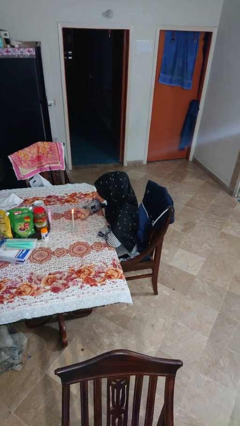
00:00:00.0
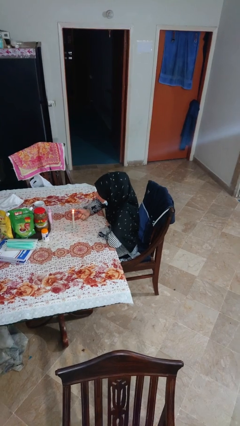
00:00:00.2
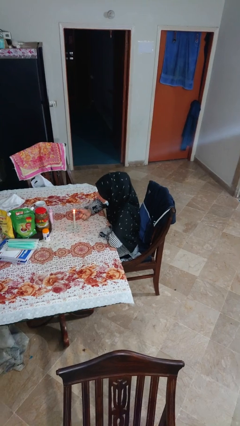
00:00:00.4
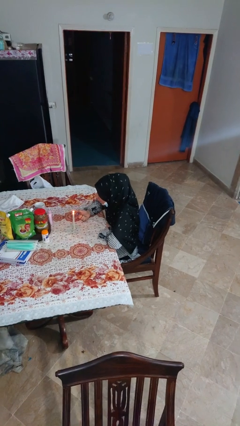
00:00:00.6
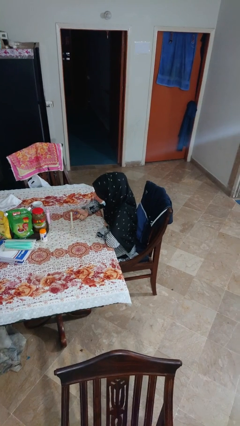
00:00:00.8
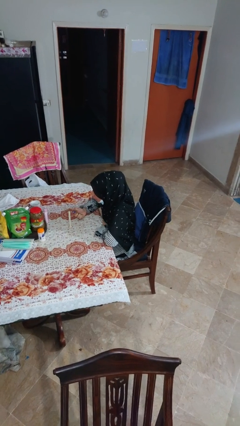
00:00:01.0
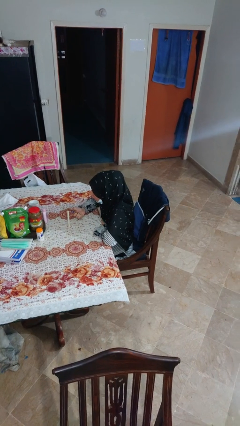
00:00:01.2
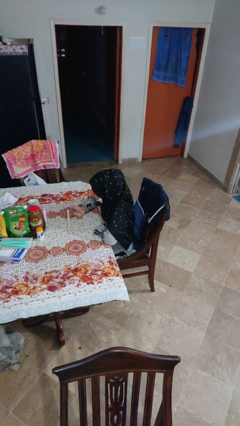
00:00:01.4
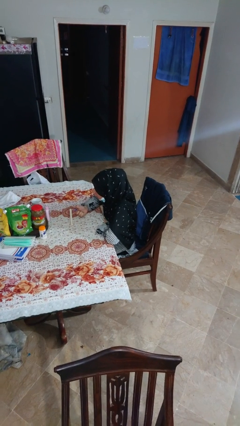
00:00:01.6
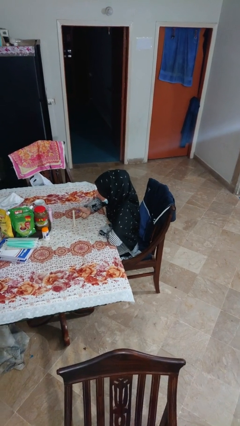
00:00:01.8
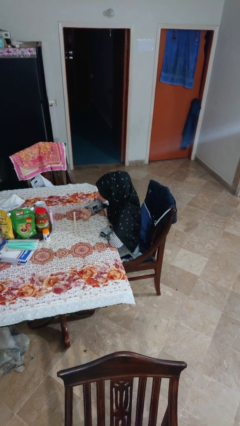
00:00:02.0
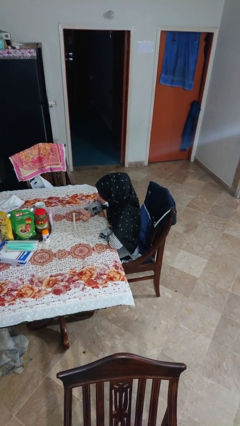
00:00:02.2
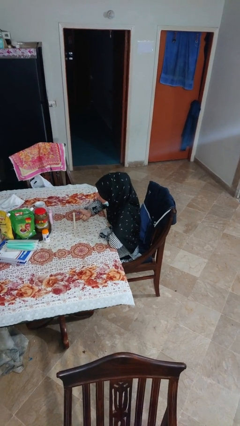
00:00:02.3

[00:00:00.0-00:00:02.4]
person extinguishes candle

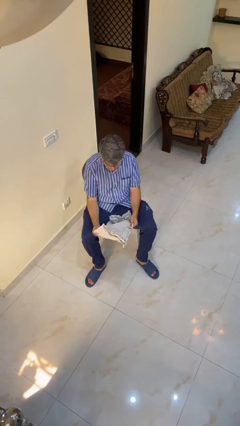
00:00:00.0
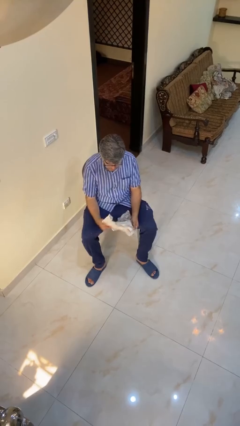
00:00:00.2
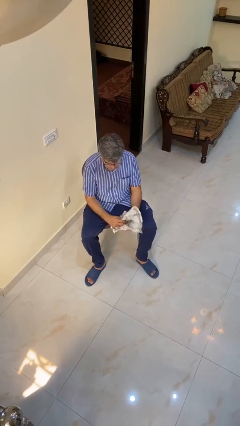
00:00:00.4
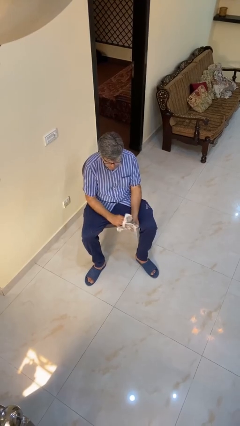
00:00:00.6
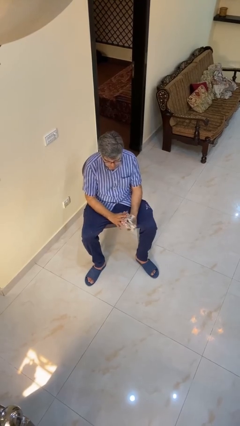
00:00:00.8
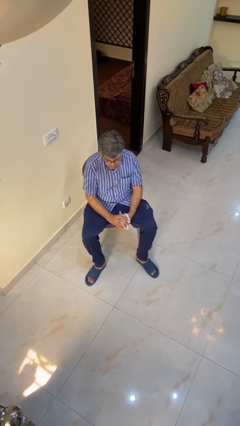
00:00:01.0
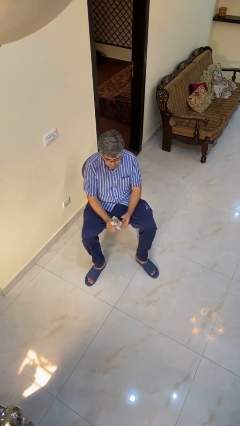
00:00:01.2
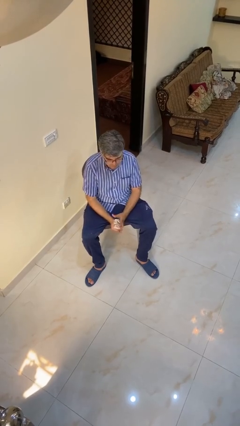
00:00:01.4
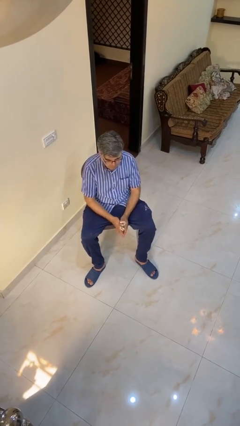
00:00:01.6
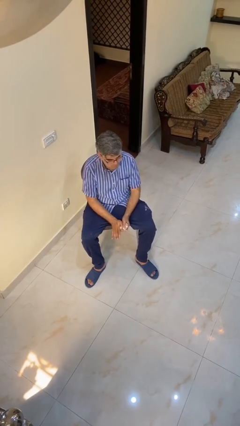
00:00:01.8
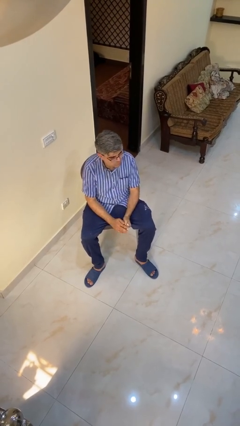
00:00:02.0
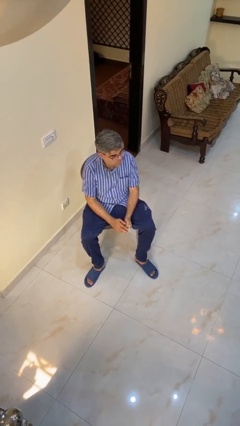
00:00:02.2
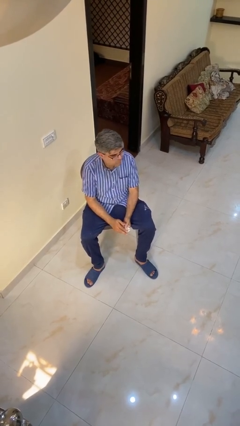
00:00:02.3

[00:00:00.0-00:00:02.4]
person crumples paper

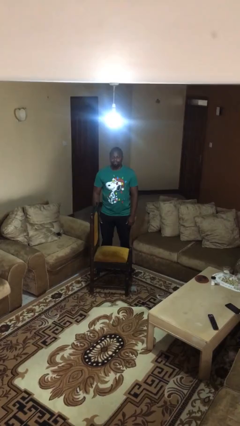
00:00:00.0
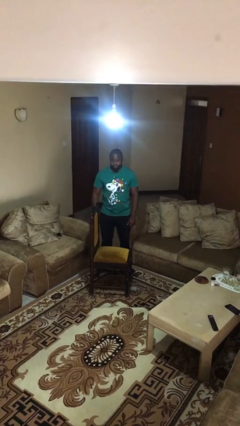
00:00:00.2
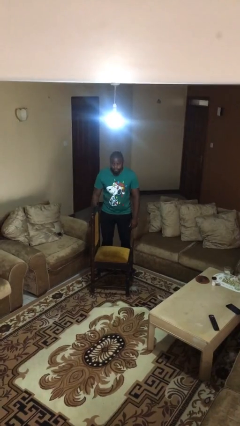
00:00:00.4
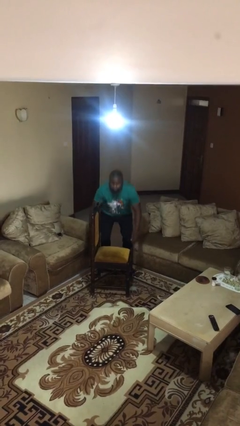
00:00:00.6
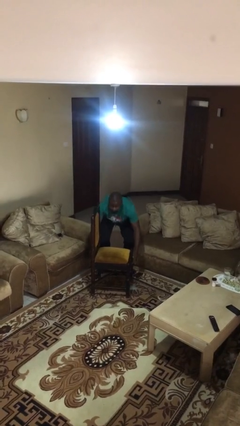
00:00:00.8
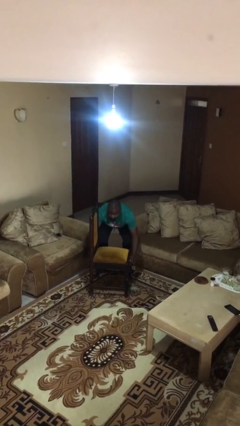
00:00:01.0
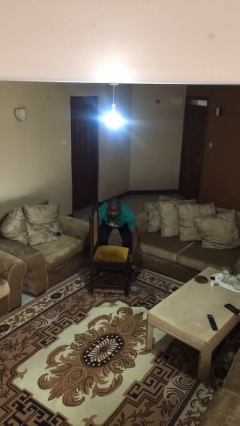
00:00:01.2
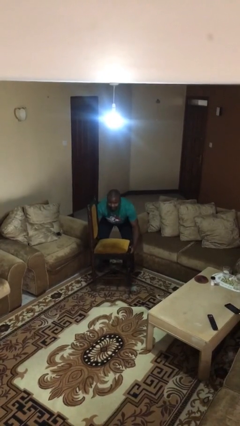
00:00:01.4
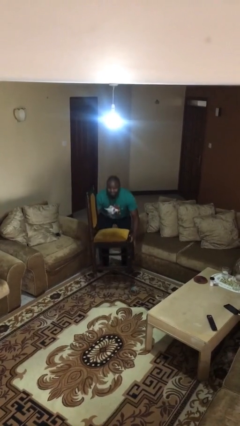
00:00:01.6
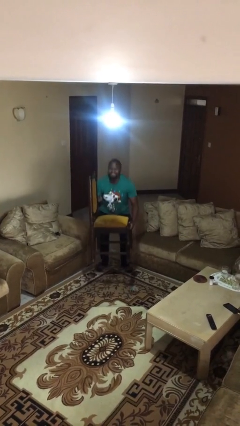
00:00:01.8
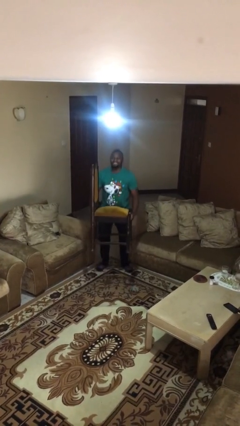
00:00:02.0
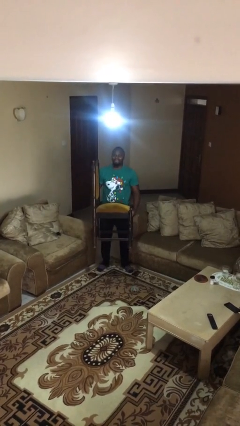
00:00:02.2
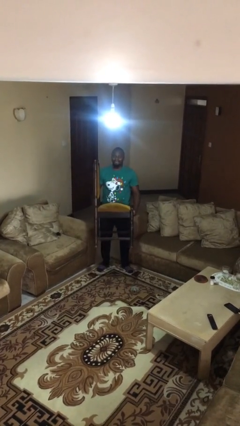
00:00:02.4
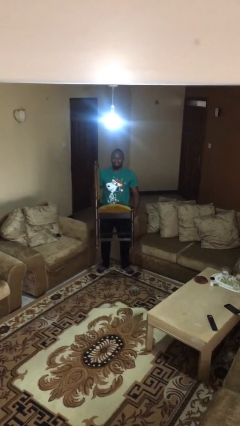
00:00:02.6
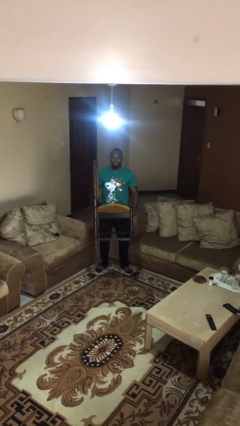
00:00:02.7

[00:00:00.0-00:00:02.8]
person picks up object from floor

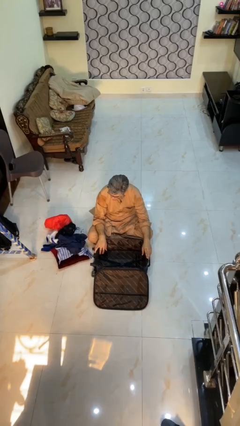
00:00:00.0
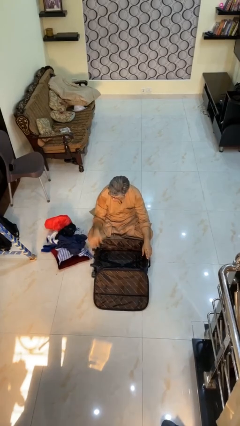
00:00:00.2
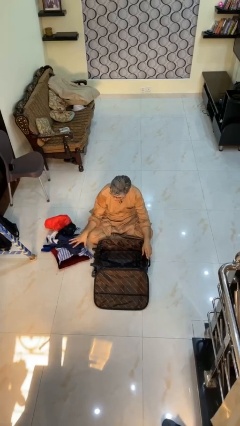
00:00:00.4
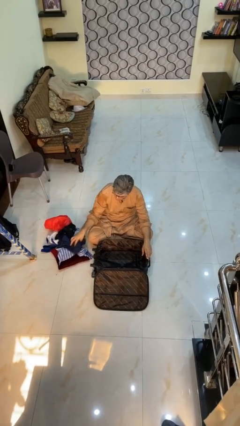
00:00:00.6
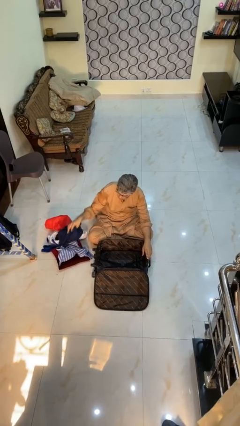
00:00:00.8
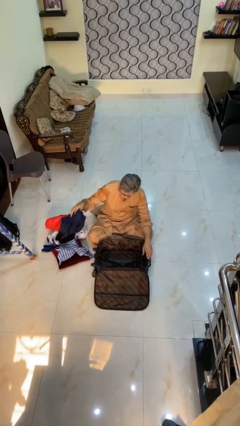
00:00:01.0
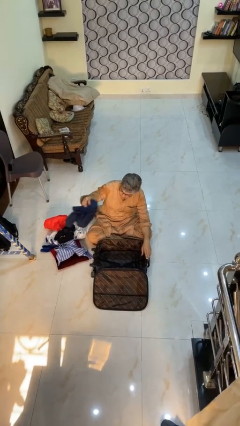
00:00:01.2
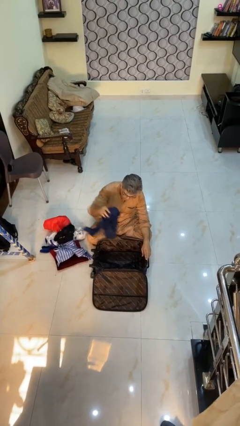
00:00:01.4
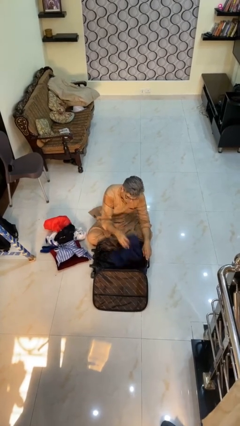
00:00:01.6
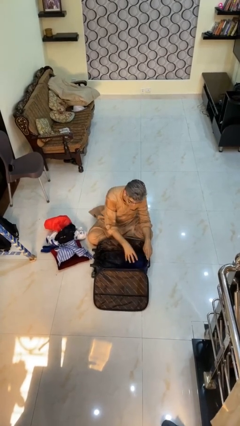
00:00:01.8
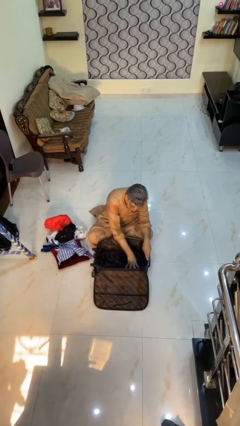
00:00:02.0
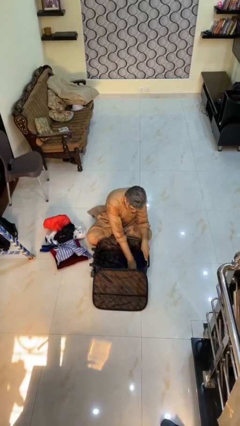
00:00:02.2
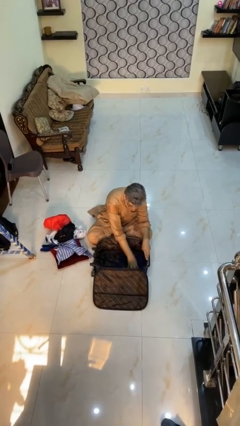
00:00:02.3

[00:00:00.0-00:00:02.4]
person loads clothes into suitcase

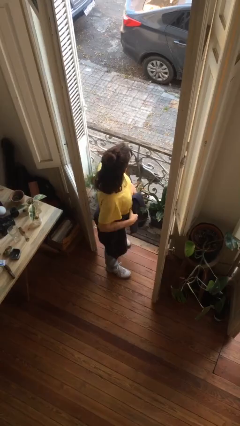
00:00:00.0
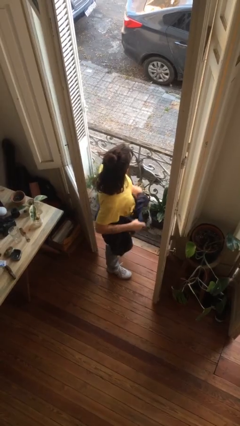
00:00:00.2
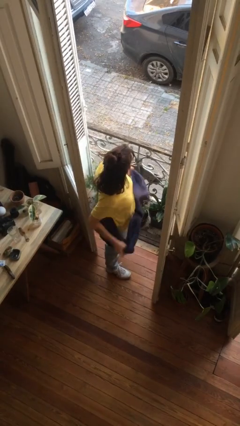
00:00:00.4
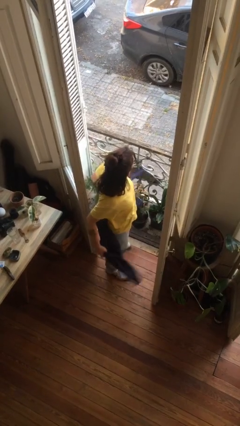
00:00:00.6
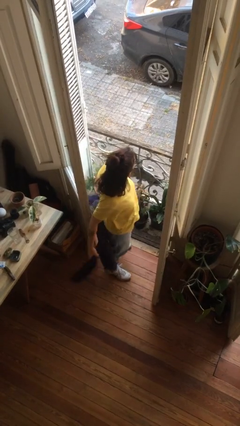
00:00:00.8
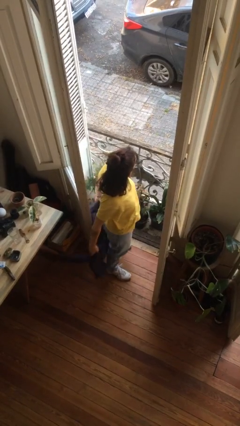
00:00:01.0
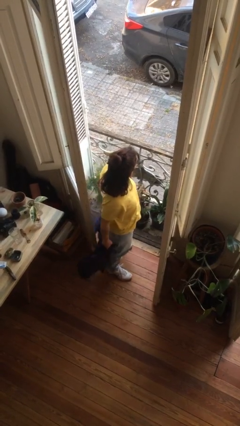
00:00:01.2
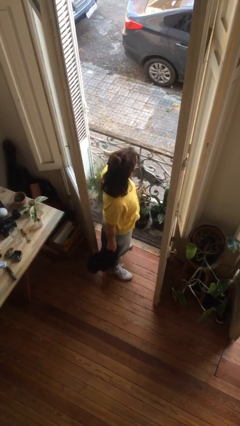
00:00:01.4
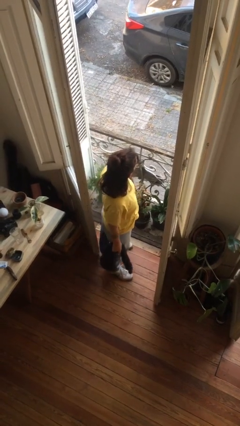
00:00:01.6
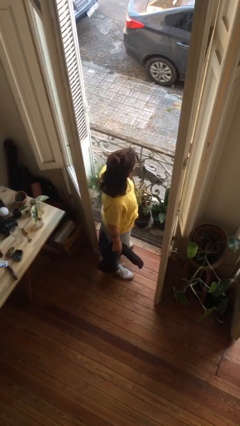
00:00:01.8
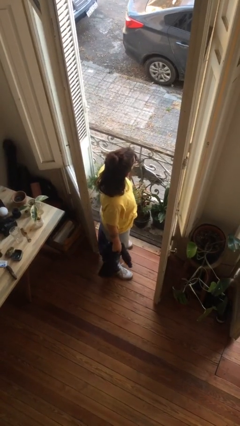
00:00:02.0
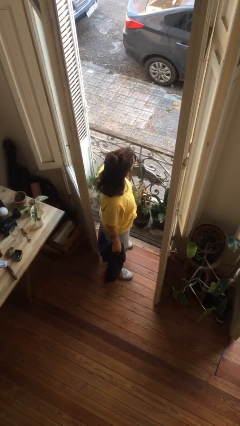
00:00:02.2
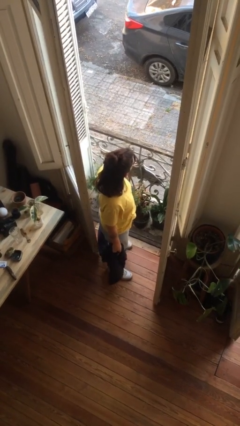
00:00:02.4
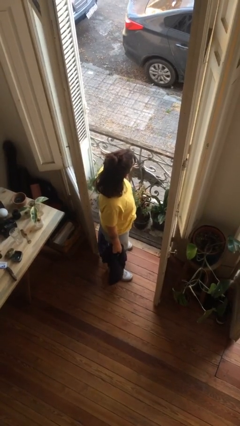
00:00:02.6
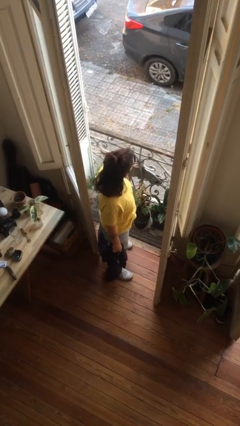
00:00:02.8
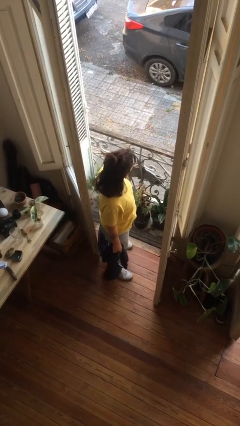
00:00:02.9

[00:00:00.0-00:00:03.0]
person unties jacket around waist

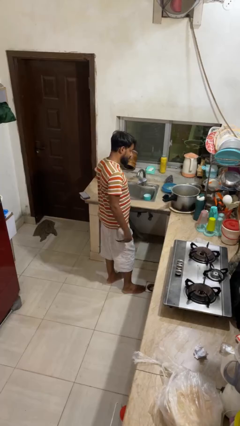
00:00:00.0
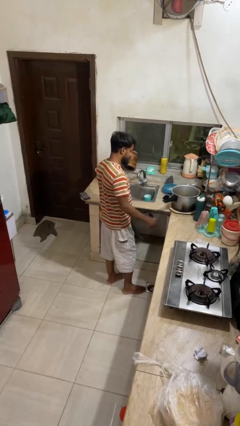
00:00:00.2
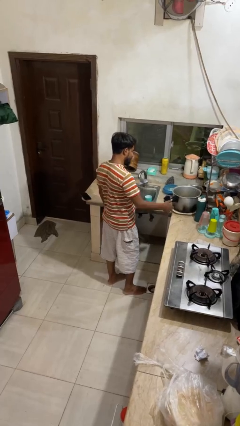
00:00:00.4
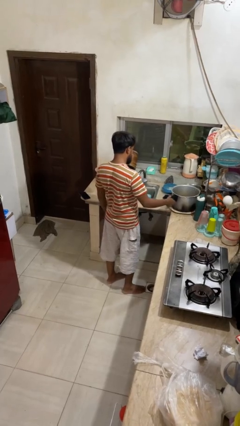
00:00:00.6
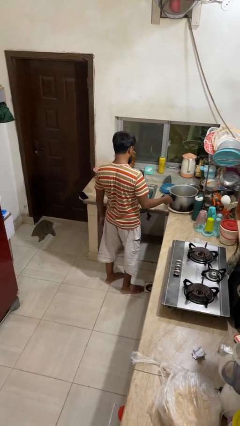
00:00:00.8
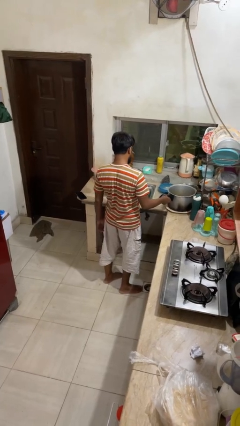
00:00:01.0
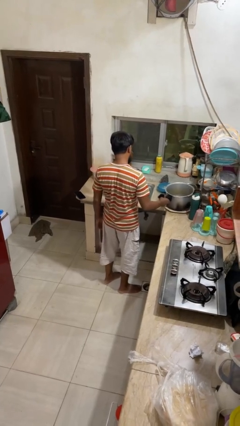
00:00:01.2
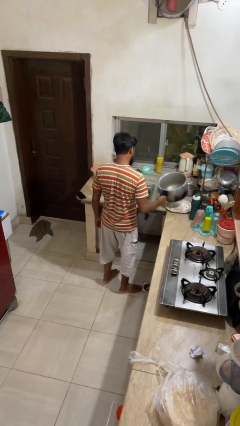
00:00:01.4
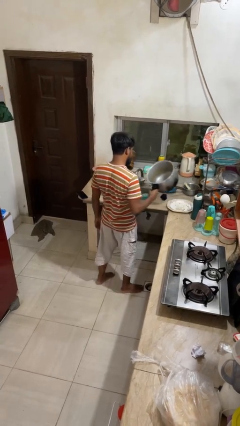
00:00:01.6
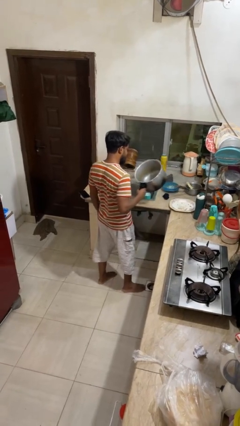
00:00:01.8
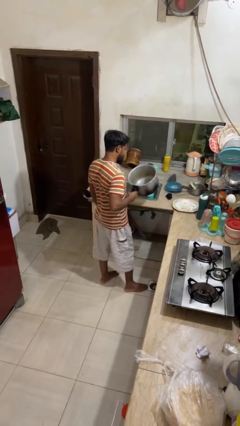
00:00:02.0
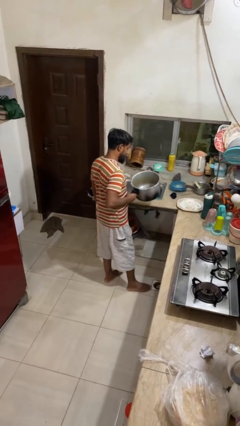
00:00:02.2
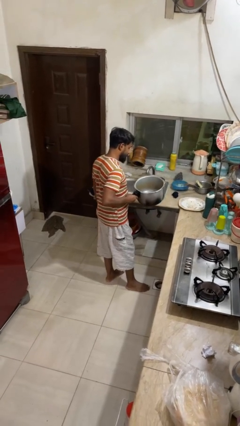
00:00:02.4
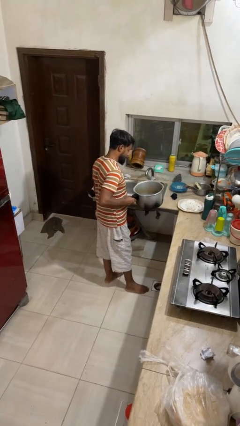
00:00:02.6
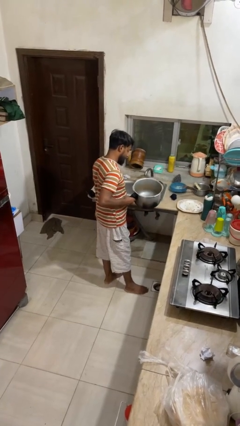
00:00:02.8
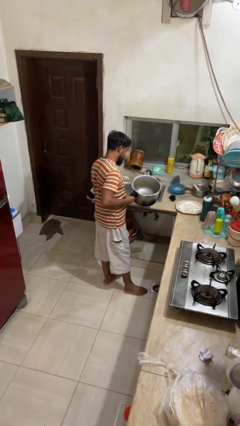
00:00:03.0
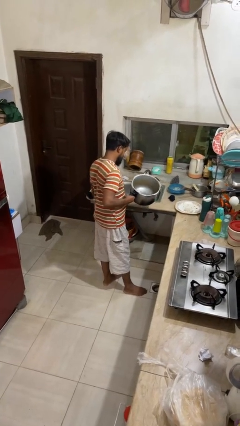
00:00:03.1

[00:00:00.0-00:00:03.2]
person picks up object from countertop

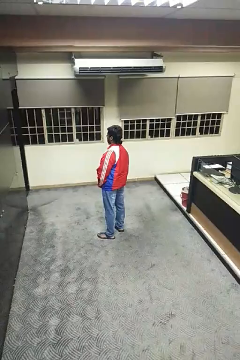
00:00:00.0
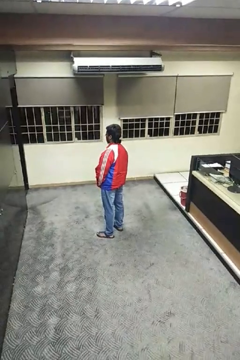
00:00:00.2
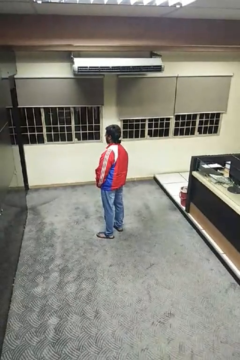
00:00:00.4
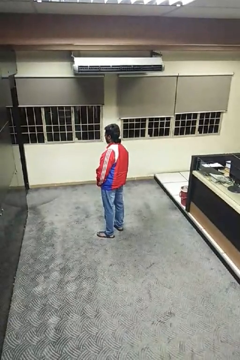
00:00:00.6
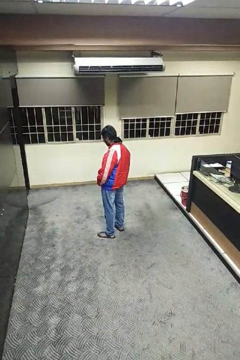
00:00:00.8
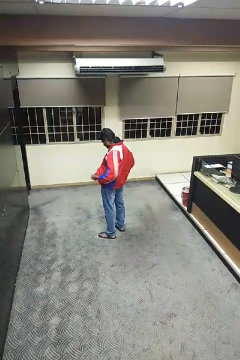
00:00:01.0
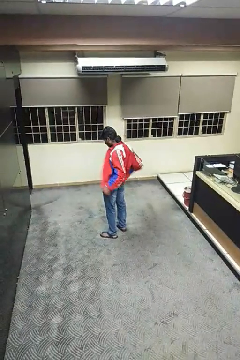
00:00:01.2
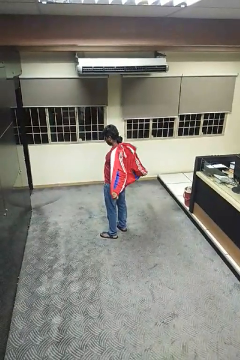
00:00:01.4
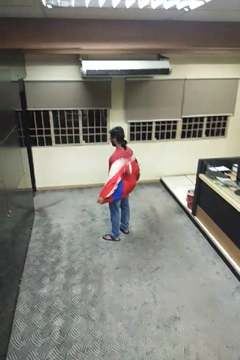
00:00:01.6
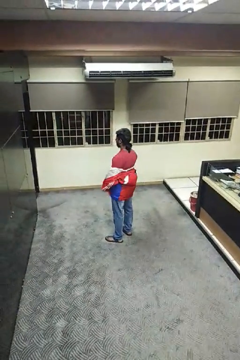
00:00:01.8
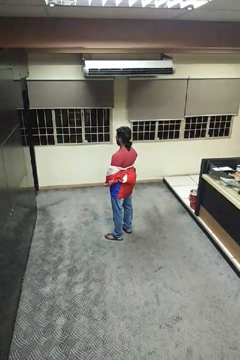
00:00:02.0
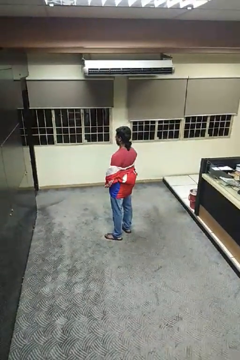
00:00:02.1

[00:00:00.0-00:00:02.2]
person takes off jacket
